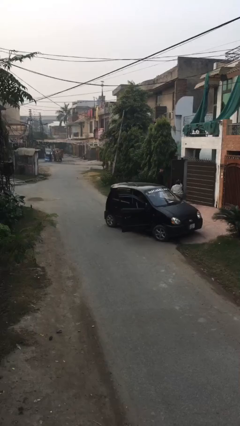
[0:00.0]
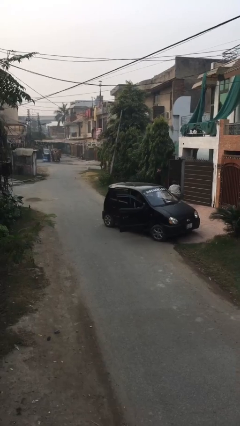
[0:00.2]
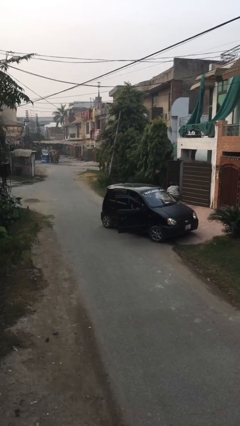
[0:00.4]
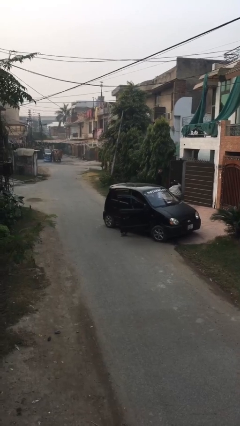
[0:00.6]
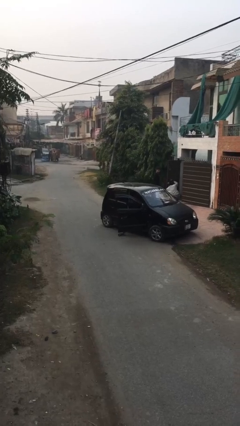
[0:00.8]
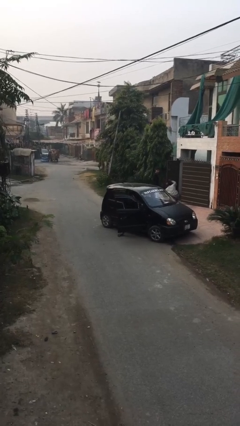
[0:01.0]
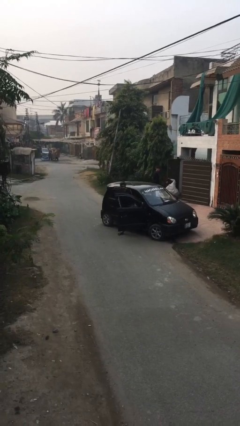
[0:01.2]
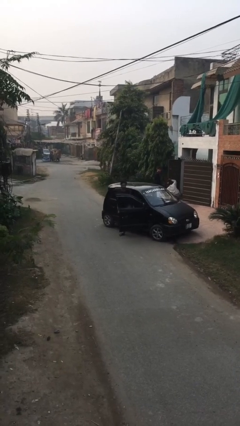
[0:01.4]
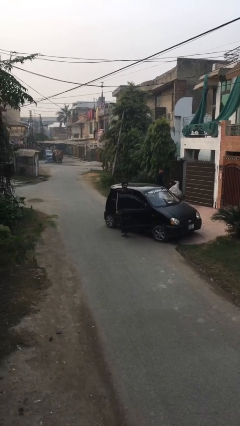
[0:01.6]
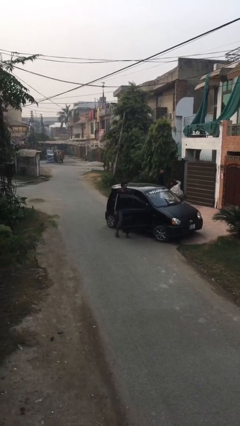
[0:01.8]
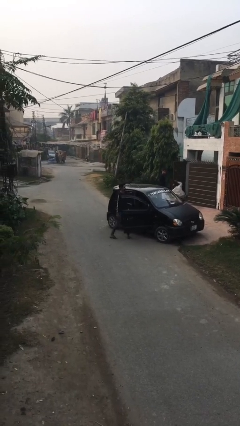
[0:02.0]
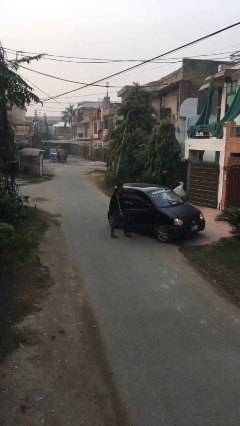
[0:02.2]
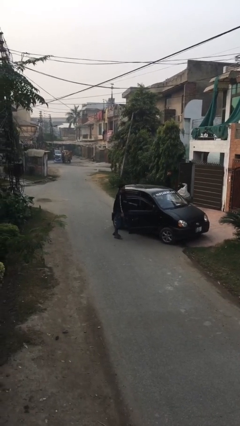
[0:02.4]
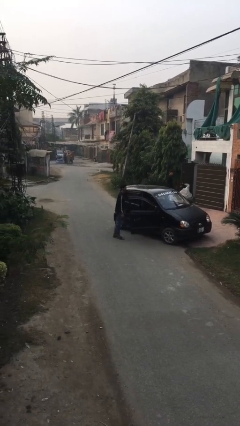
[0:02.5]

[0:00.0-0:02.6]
person exits car

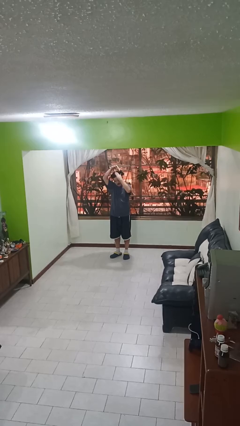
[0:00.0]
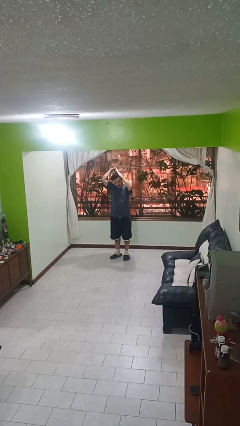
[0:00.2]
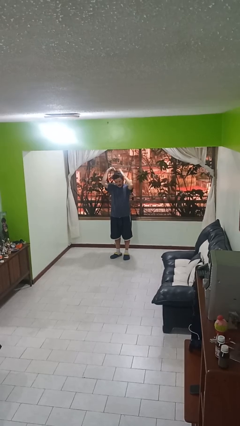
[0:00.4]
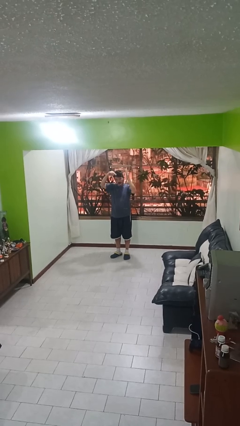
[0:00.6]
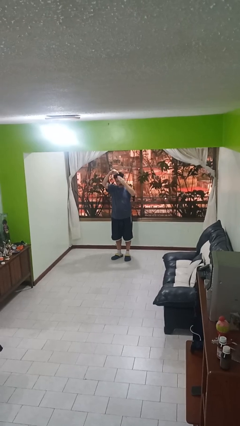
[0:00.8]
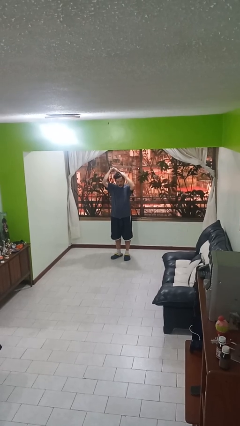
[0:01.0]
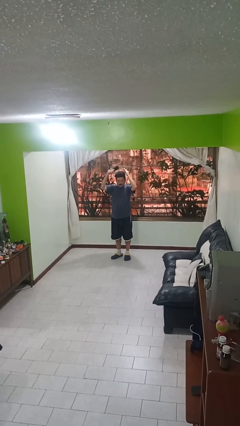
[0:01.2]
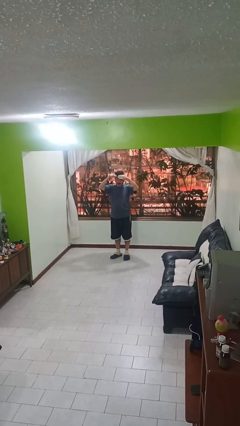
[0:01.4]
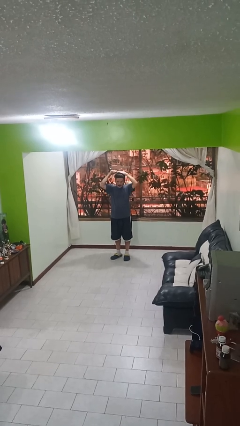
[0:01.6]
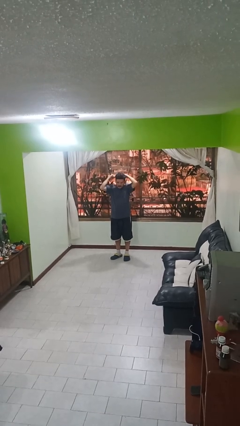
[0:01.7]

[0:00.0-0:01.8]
person brushes hair

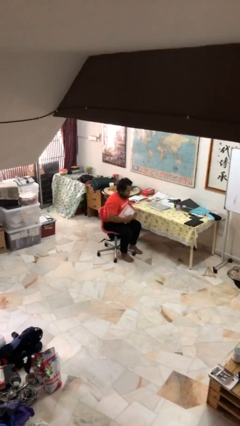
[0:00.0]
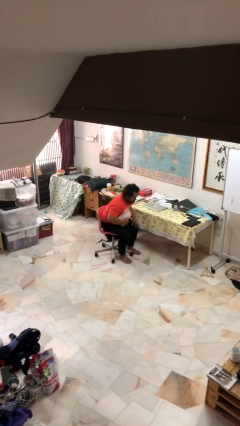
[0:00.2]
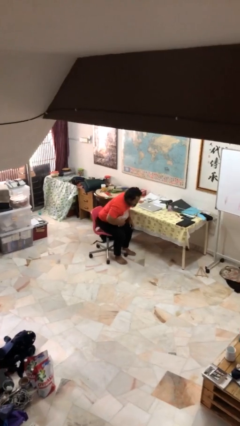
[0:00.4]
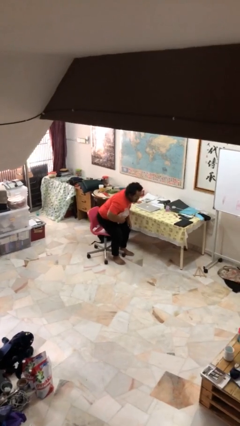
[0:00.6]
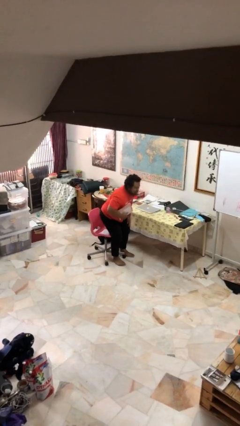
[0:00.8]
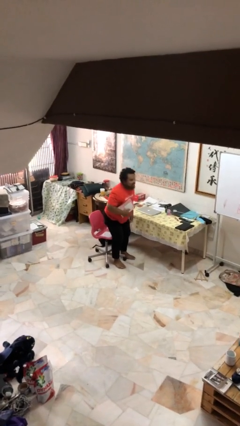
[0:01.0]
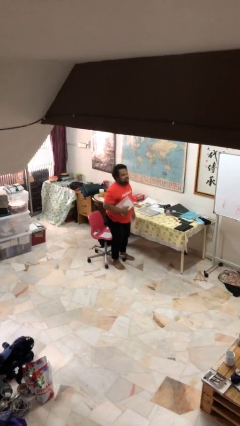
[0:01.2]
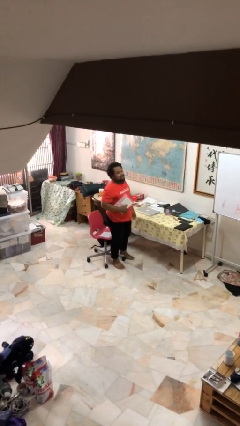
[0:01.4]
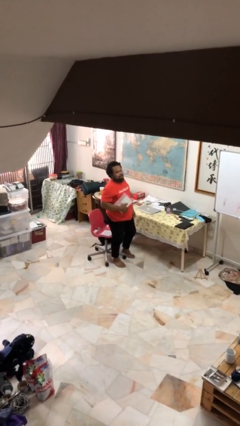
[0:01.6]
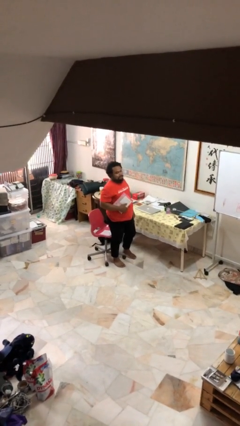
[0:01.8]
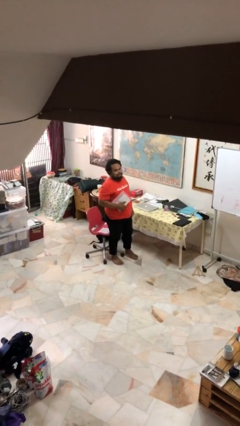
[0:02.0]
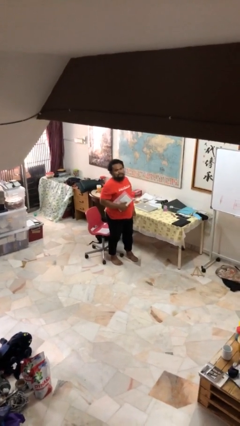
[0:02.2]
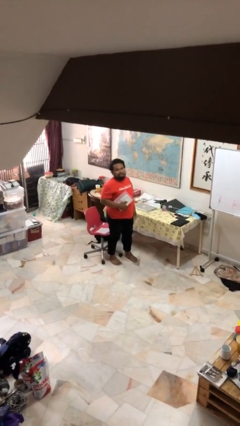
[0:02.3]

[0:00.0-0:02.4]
person stands up

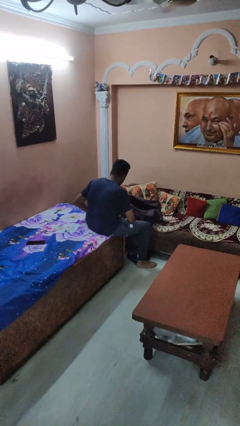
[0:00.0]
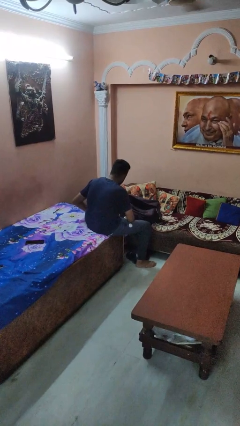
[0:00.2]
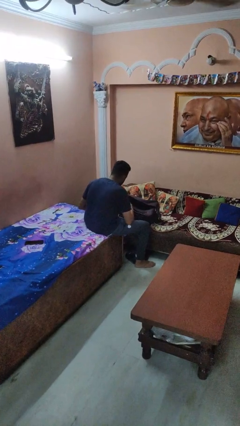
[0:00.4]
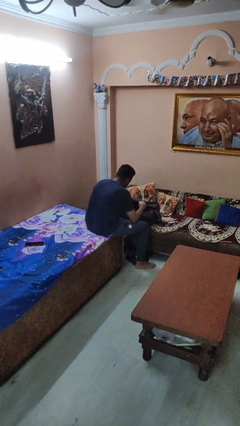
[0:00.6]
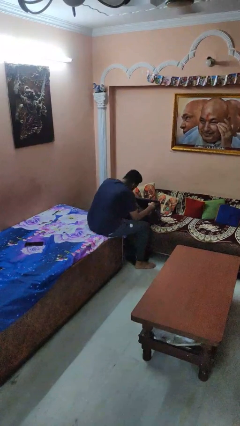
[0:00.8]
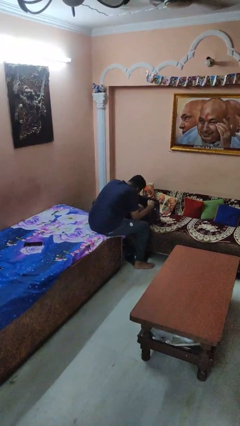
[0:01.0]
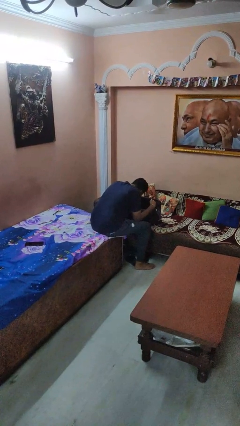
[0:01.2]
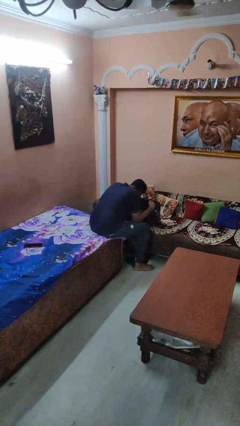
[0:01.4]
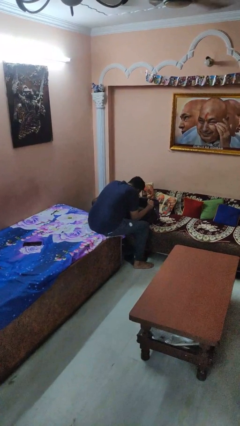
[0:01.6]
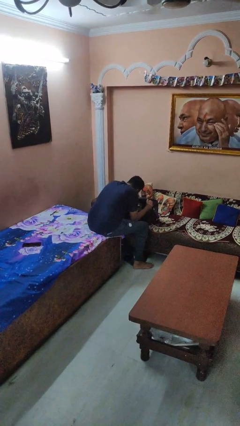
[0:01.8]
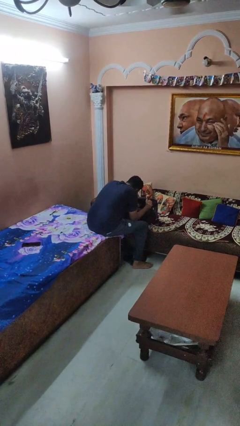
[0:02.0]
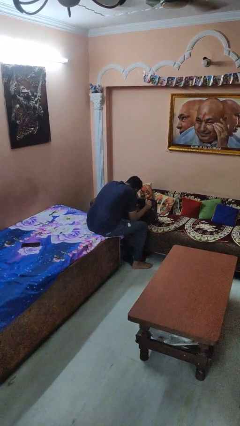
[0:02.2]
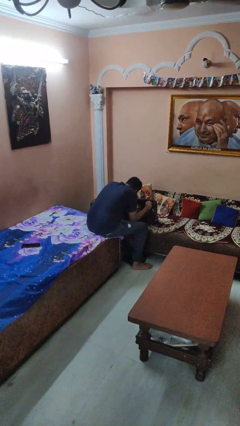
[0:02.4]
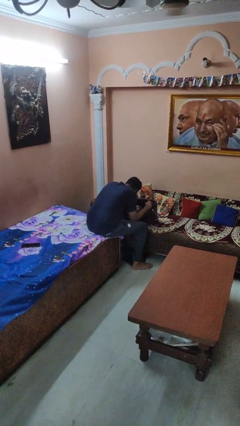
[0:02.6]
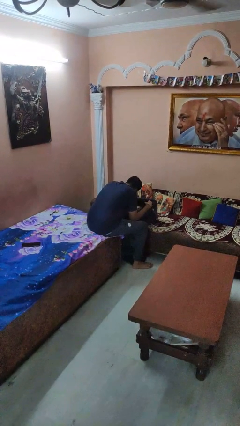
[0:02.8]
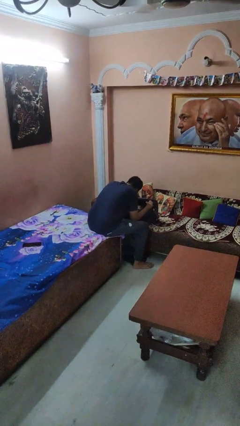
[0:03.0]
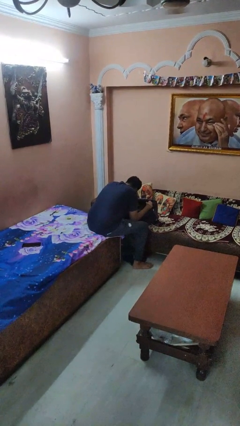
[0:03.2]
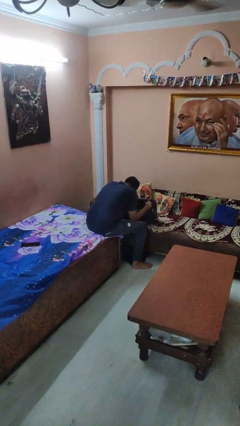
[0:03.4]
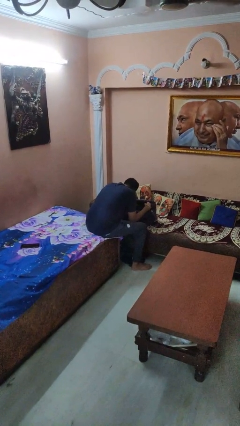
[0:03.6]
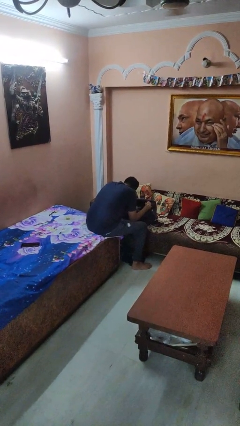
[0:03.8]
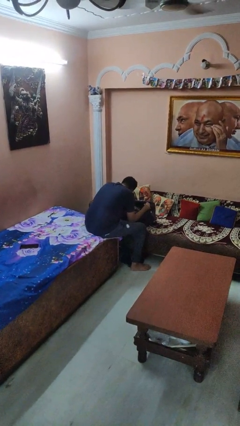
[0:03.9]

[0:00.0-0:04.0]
person searches in bag

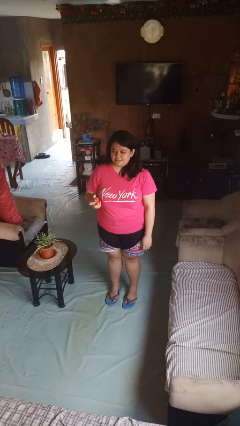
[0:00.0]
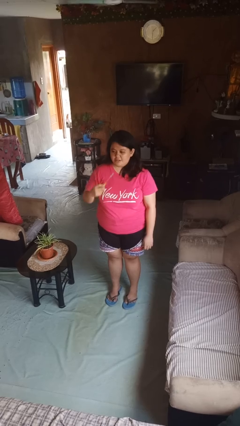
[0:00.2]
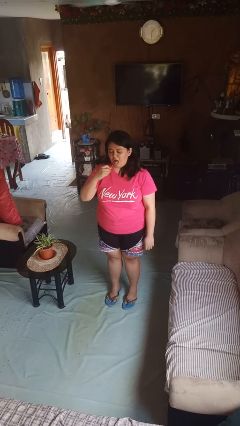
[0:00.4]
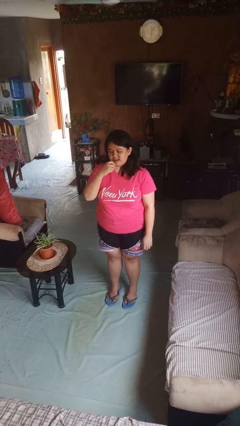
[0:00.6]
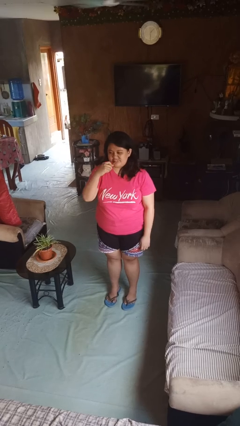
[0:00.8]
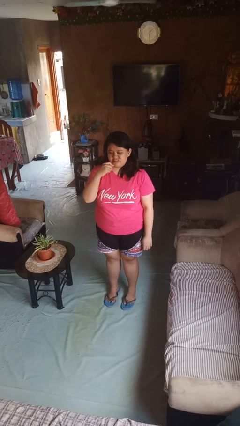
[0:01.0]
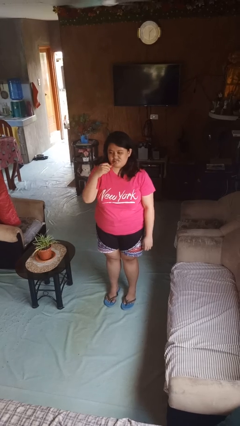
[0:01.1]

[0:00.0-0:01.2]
person brushes teeth

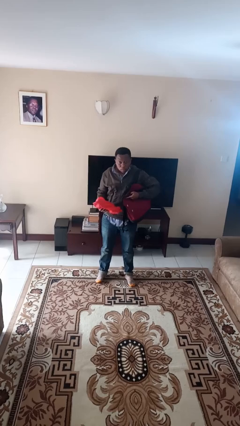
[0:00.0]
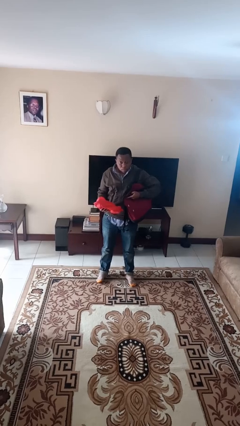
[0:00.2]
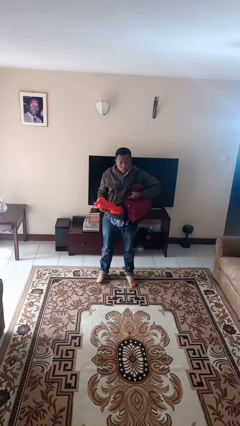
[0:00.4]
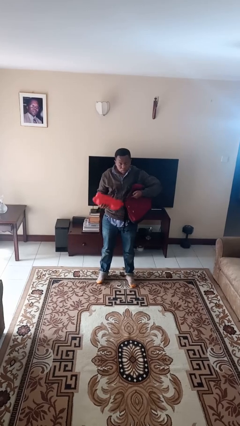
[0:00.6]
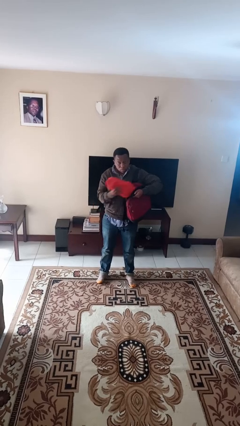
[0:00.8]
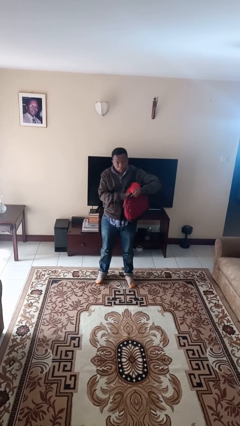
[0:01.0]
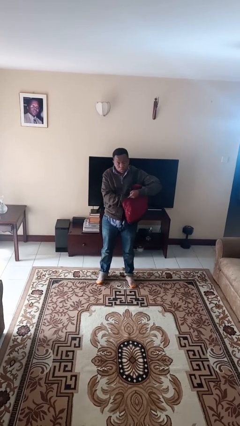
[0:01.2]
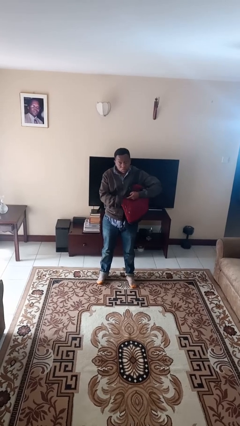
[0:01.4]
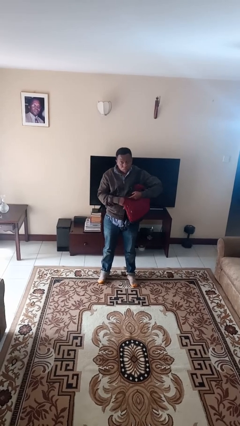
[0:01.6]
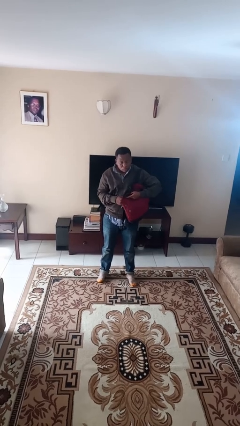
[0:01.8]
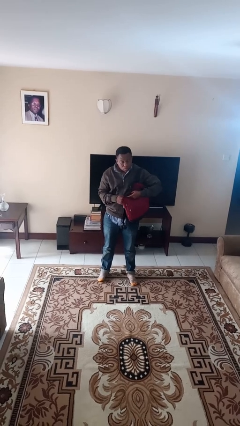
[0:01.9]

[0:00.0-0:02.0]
person puts object into backpack

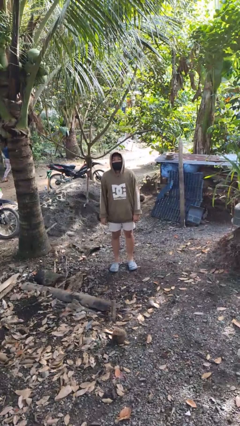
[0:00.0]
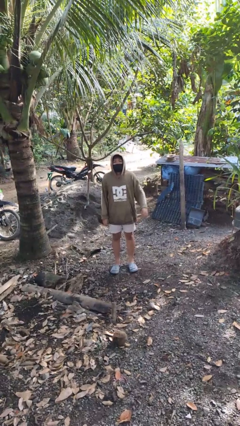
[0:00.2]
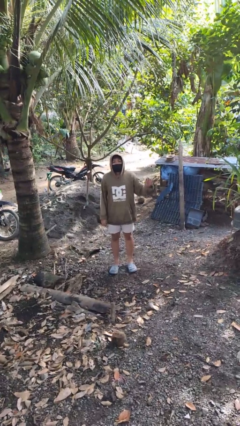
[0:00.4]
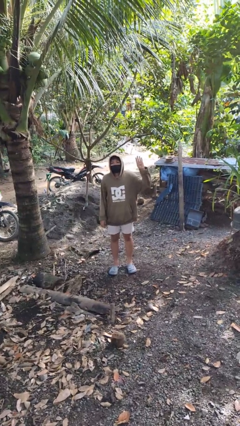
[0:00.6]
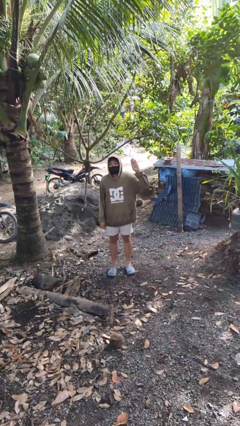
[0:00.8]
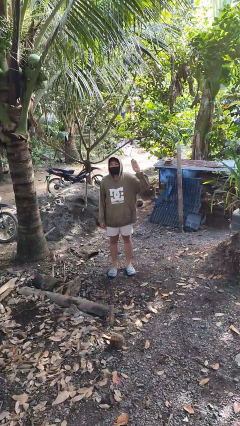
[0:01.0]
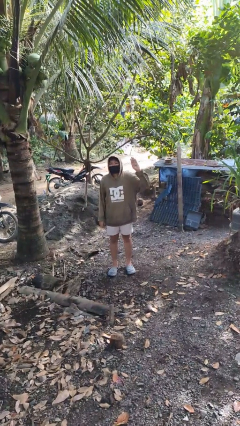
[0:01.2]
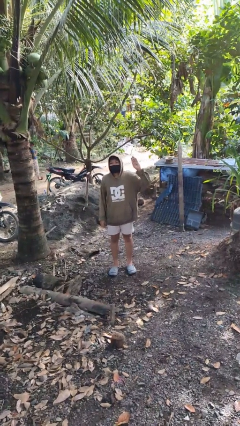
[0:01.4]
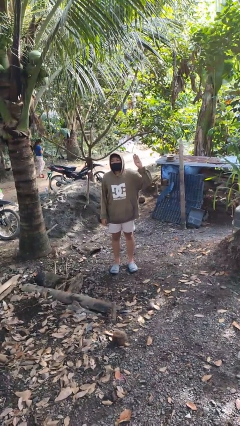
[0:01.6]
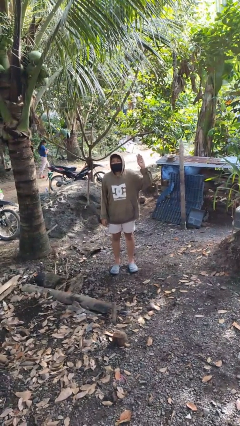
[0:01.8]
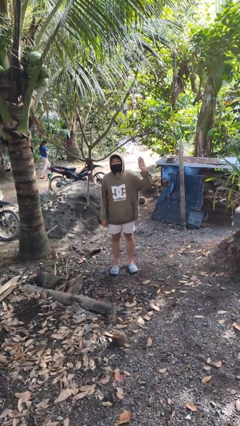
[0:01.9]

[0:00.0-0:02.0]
person gestures number four

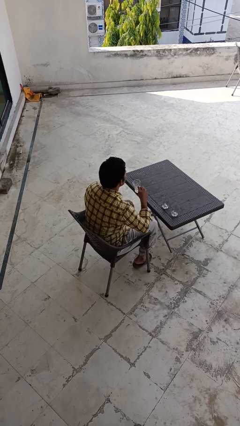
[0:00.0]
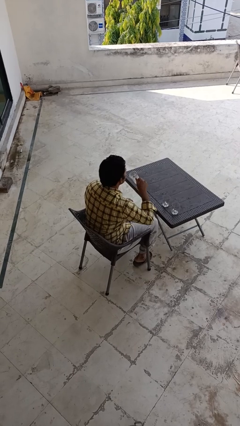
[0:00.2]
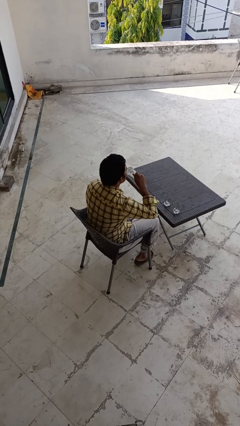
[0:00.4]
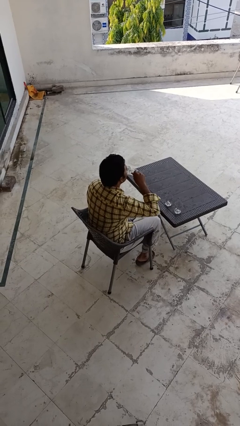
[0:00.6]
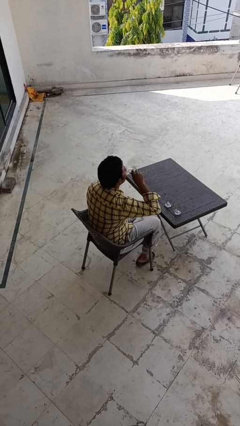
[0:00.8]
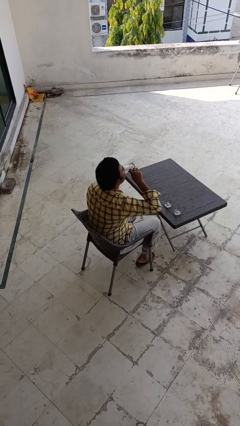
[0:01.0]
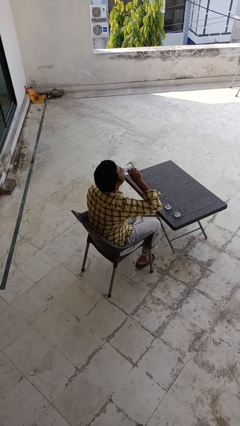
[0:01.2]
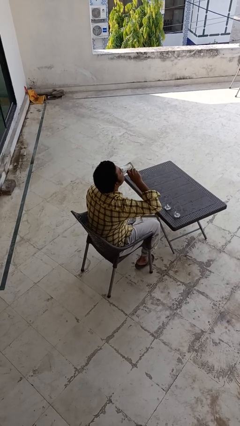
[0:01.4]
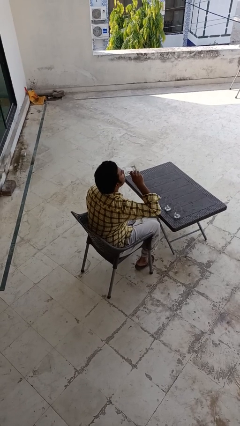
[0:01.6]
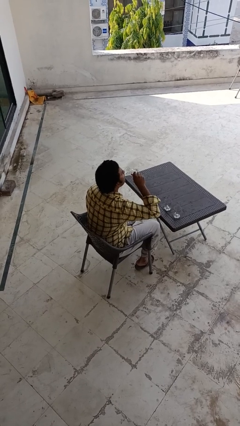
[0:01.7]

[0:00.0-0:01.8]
person drinks from shotglass
